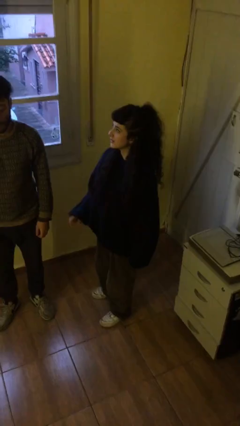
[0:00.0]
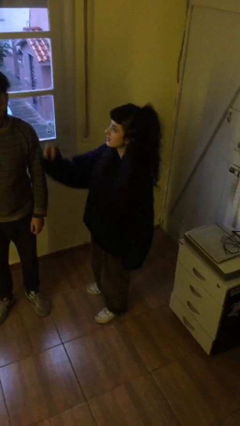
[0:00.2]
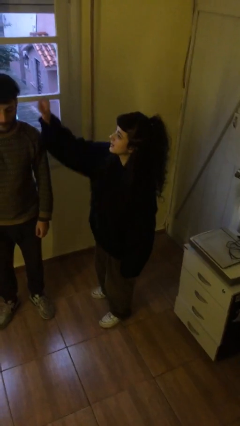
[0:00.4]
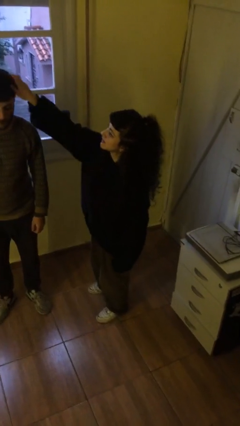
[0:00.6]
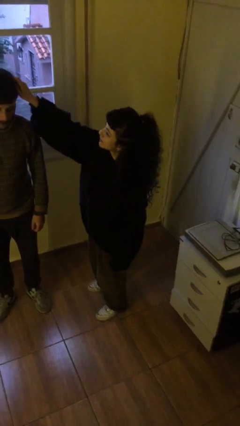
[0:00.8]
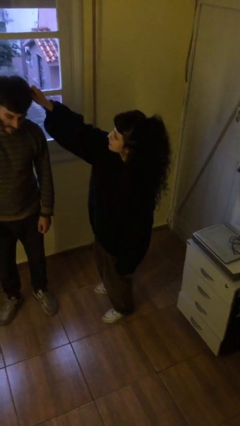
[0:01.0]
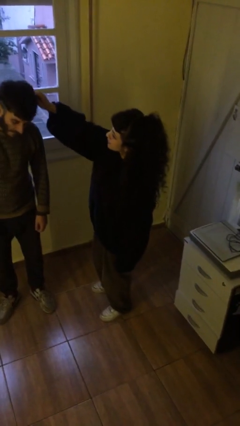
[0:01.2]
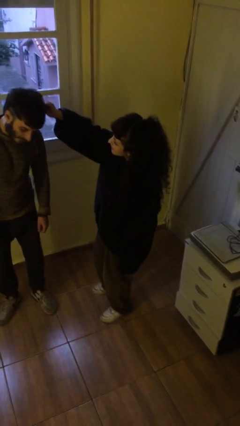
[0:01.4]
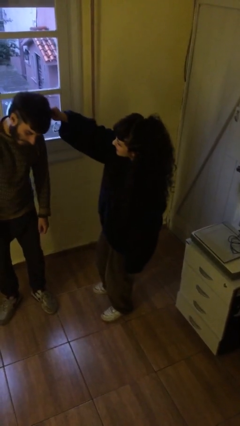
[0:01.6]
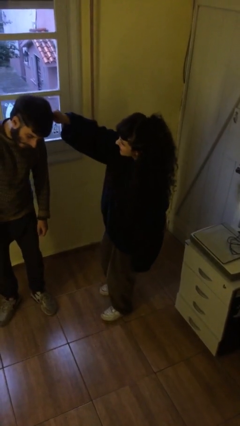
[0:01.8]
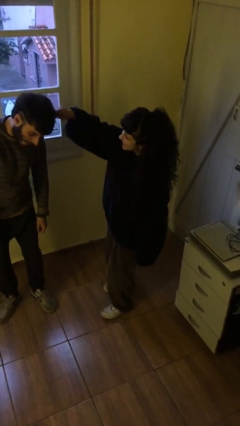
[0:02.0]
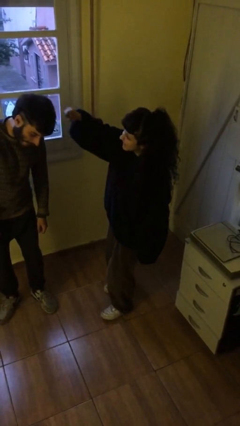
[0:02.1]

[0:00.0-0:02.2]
person grabs person by hair

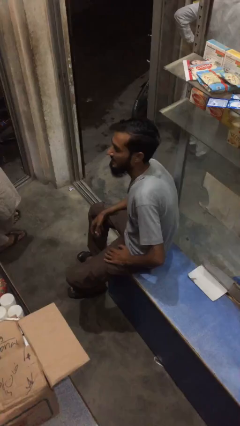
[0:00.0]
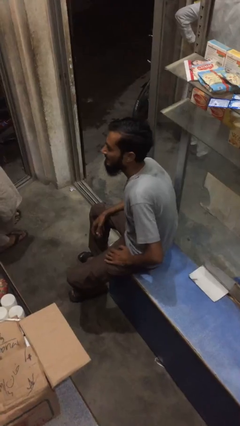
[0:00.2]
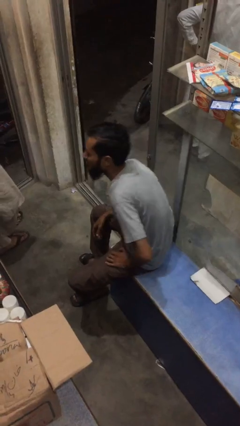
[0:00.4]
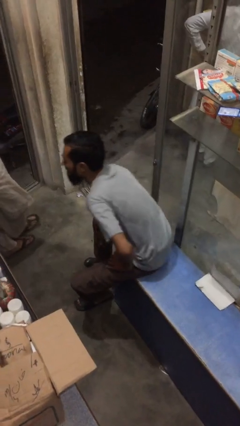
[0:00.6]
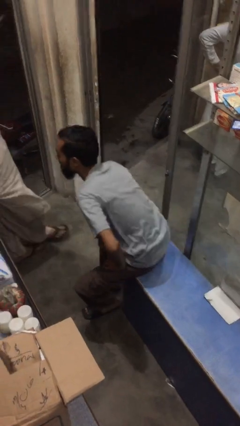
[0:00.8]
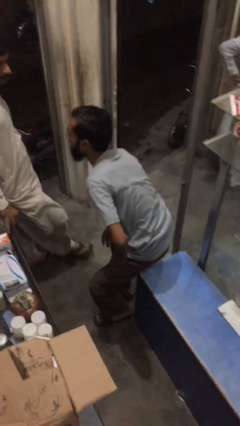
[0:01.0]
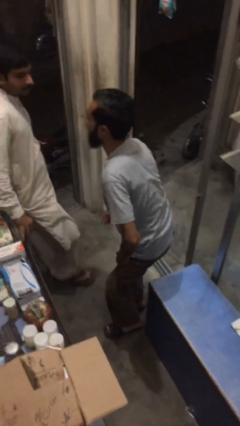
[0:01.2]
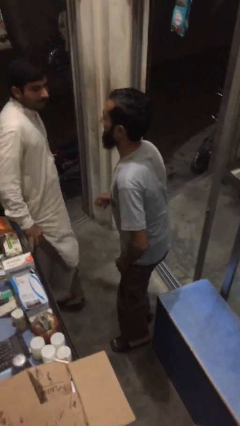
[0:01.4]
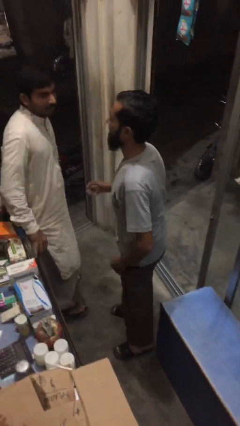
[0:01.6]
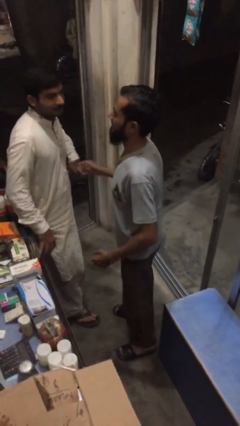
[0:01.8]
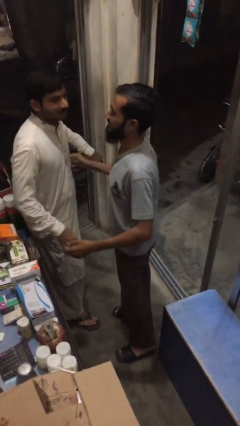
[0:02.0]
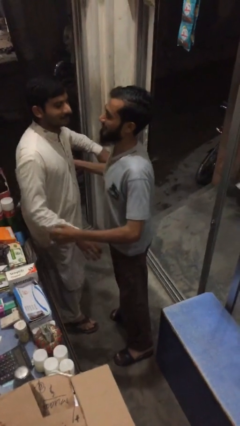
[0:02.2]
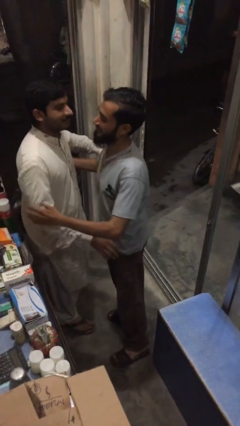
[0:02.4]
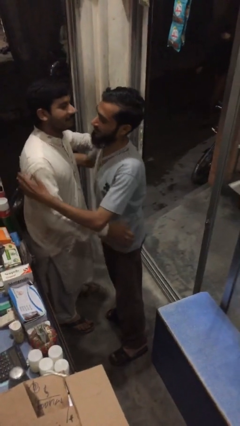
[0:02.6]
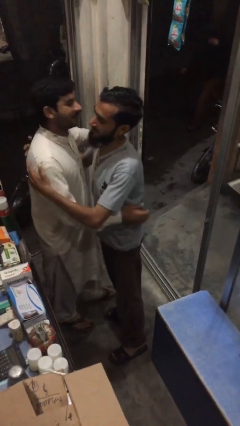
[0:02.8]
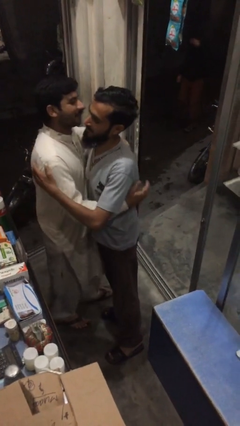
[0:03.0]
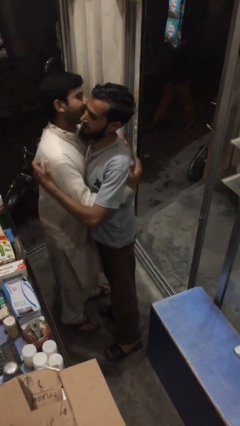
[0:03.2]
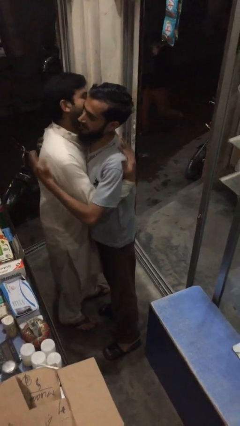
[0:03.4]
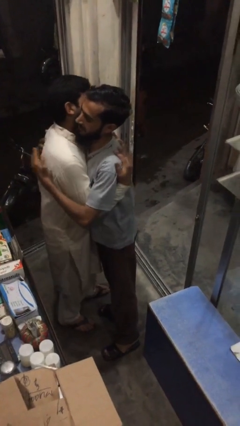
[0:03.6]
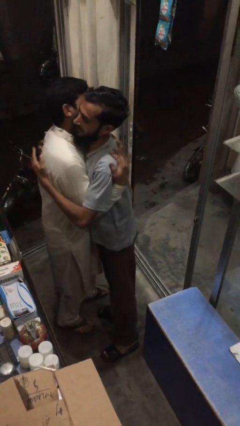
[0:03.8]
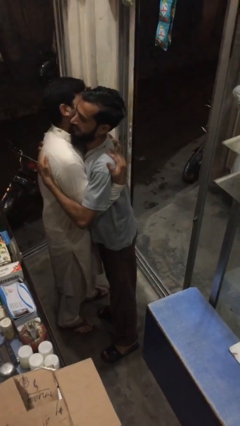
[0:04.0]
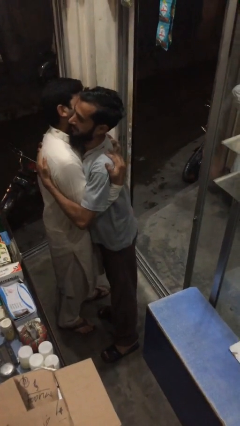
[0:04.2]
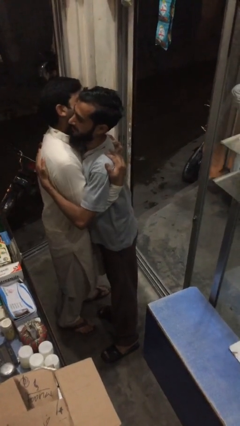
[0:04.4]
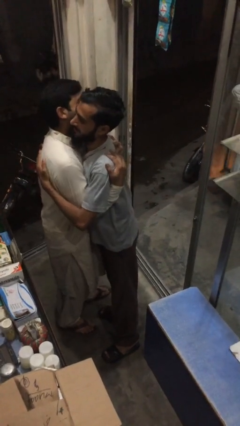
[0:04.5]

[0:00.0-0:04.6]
person embraces person

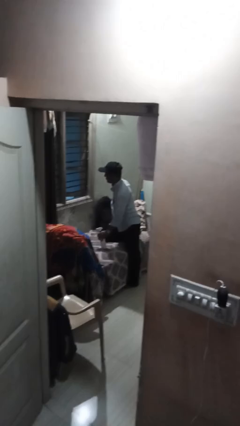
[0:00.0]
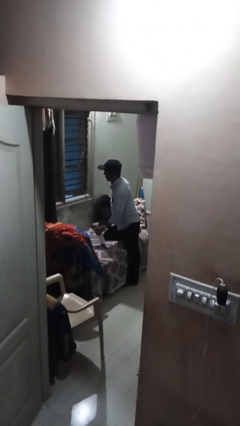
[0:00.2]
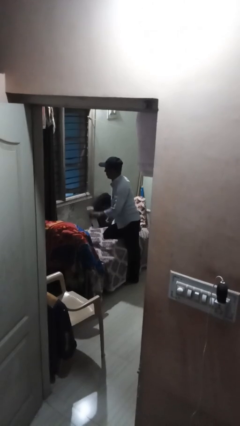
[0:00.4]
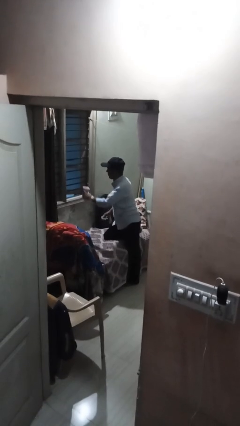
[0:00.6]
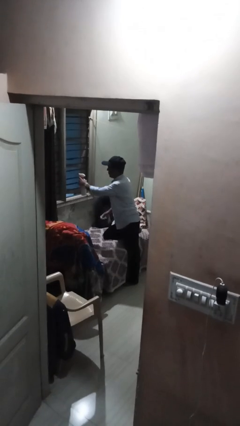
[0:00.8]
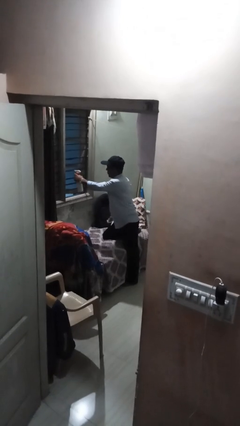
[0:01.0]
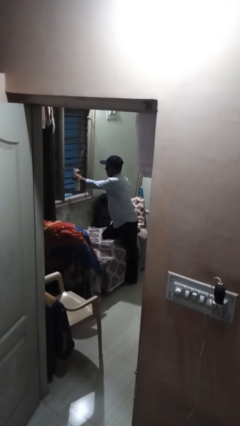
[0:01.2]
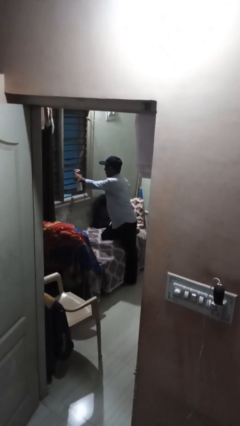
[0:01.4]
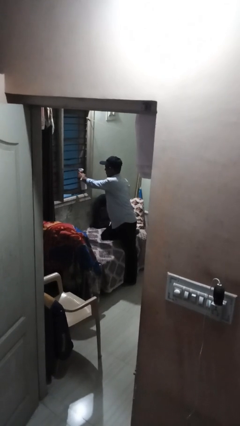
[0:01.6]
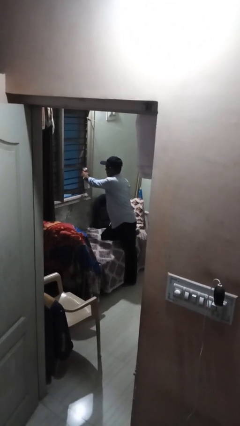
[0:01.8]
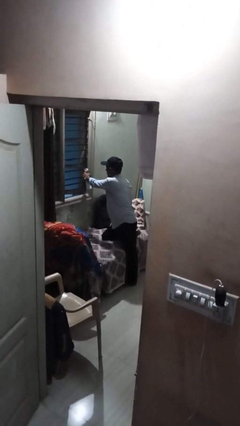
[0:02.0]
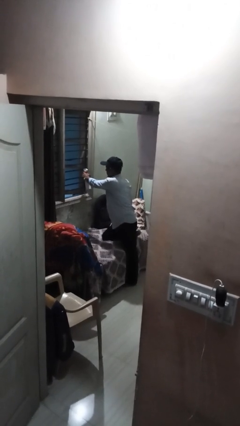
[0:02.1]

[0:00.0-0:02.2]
person sprays from bottle

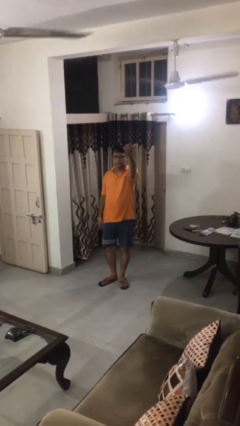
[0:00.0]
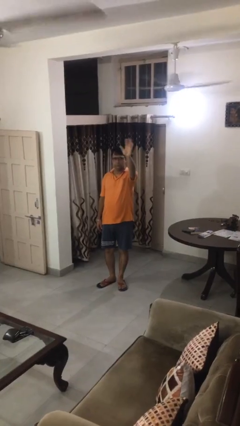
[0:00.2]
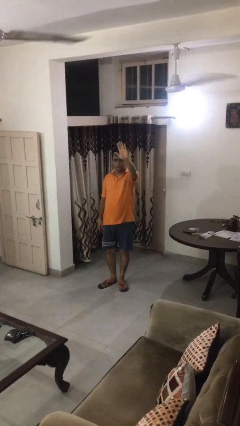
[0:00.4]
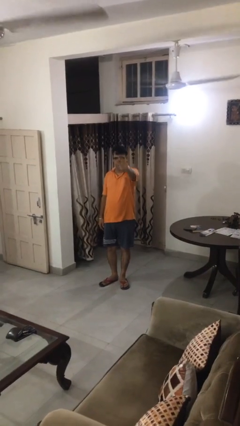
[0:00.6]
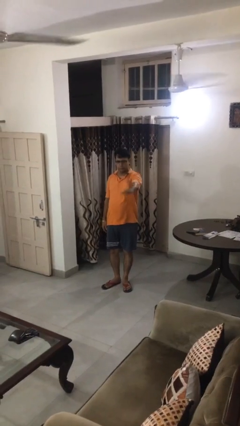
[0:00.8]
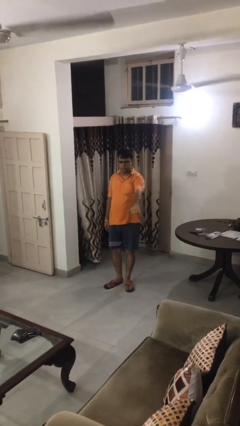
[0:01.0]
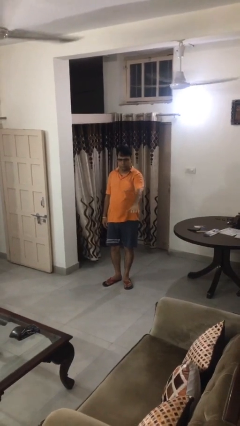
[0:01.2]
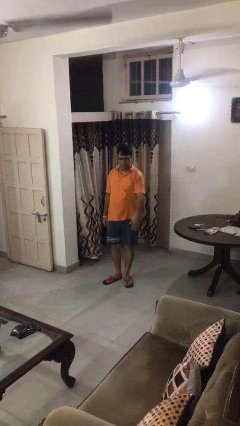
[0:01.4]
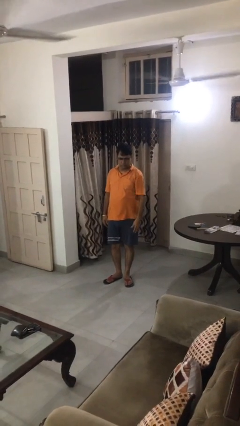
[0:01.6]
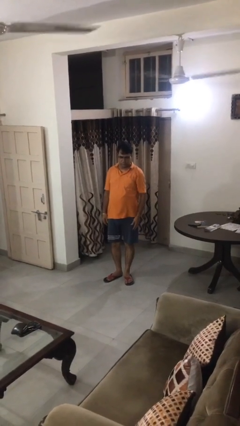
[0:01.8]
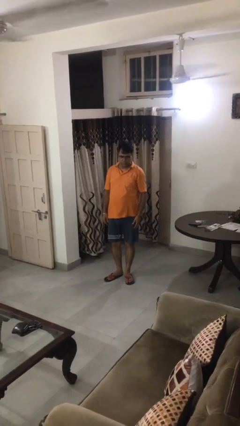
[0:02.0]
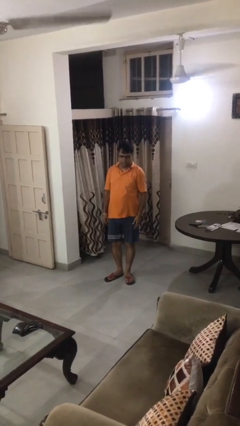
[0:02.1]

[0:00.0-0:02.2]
person gestures swipe down

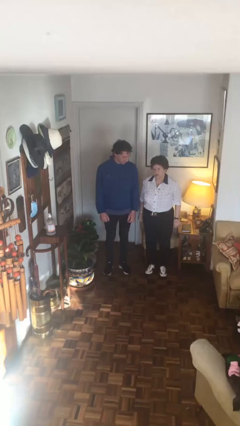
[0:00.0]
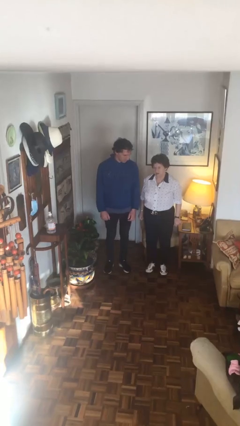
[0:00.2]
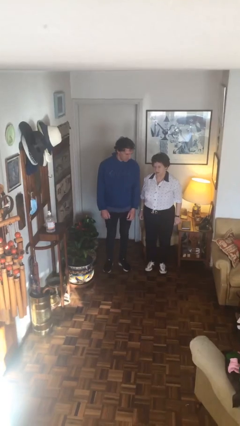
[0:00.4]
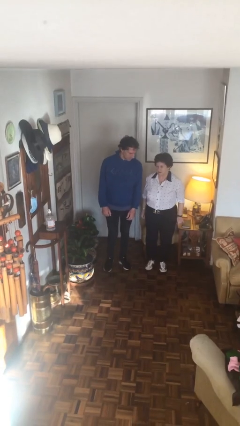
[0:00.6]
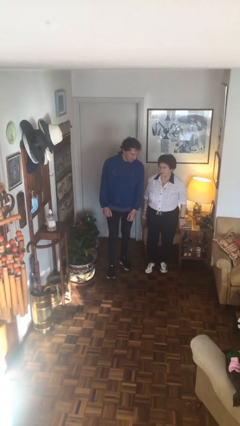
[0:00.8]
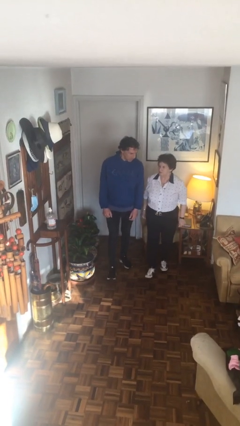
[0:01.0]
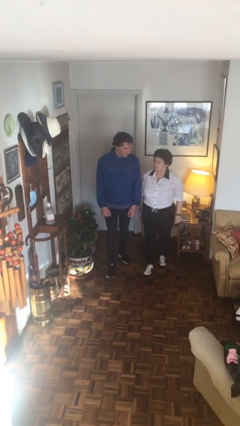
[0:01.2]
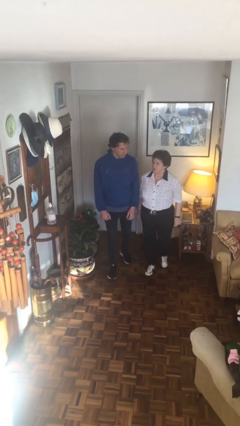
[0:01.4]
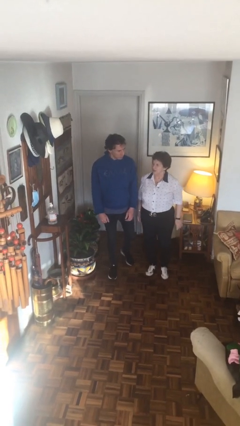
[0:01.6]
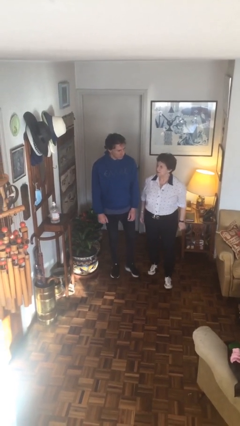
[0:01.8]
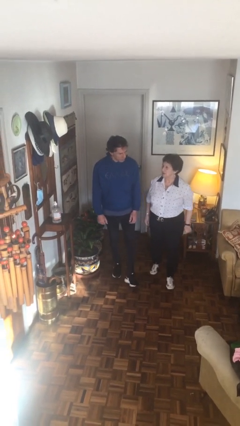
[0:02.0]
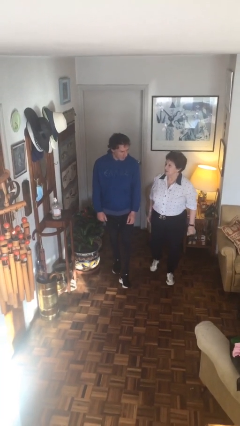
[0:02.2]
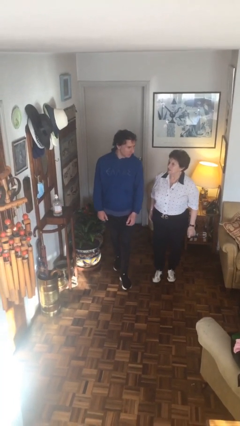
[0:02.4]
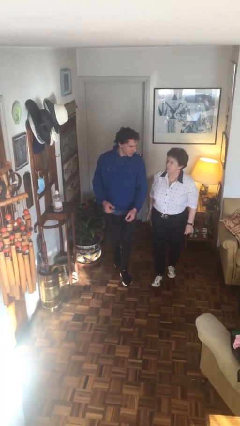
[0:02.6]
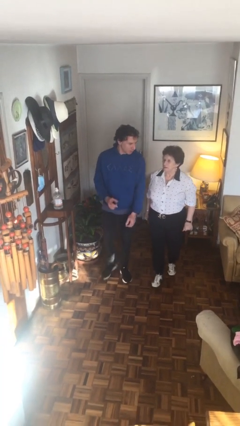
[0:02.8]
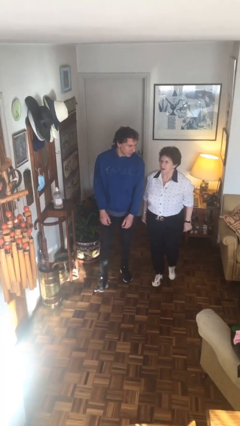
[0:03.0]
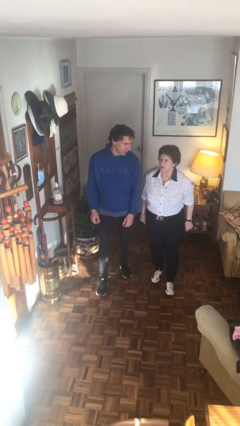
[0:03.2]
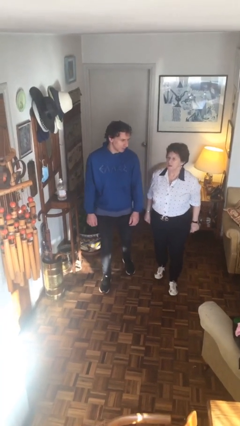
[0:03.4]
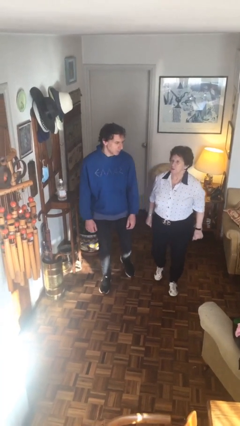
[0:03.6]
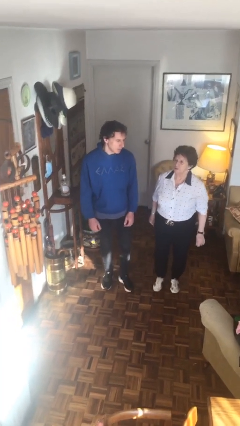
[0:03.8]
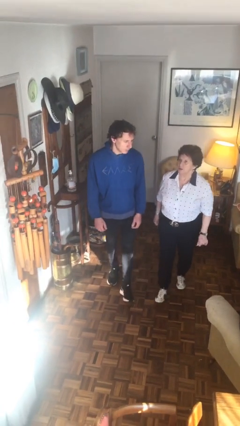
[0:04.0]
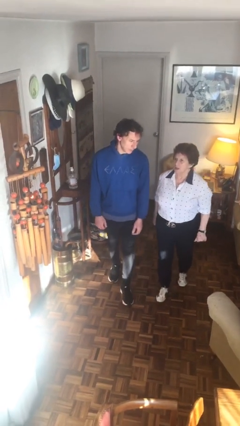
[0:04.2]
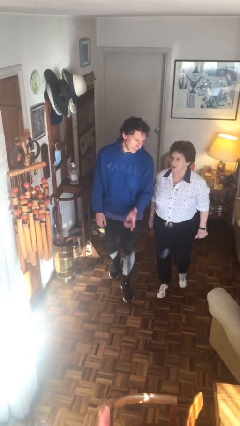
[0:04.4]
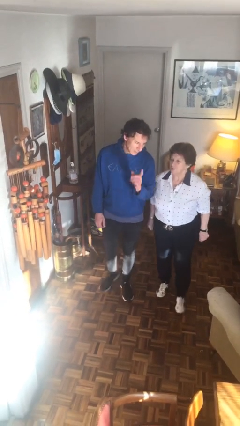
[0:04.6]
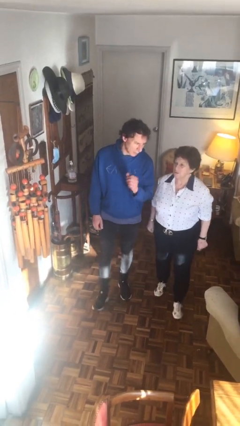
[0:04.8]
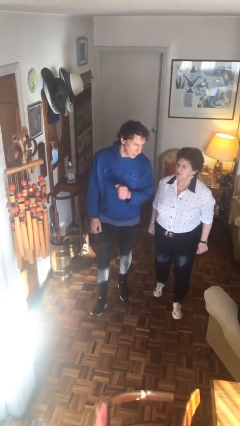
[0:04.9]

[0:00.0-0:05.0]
person talks to person

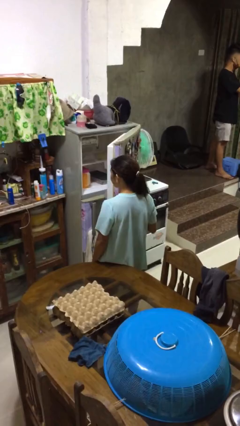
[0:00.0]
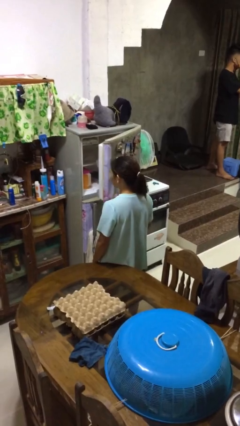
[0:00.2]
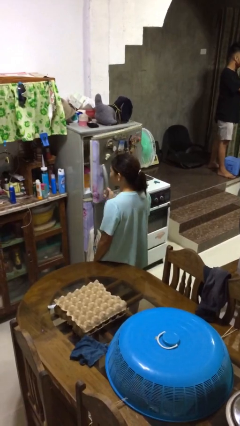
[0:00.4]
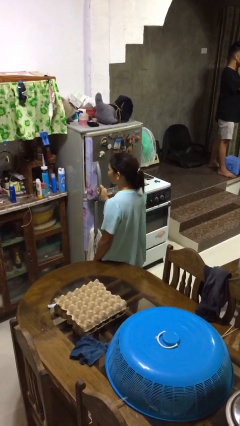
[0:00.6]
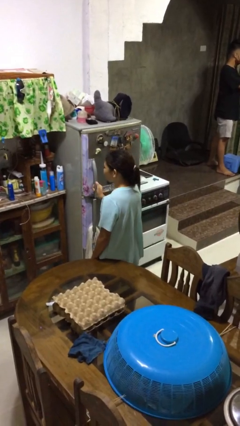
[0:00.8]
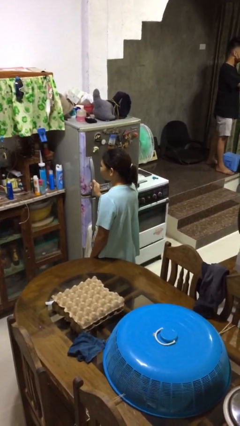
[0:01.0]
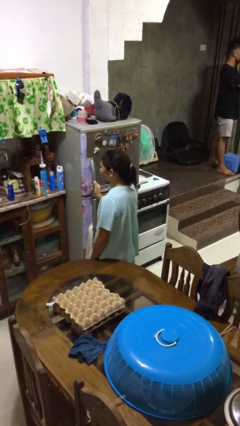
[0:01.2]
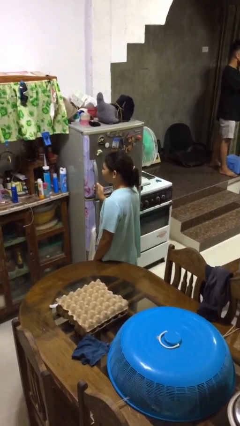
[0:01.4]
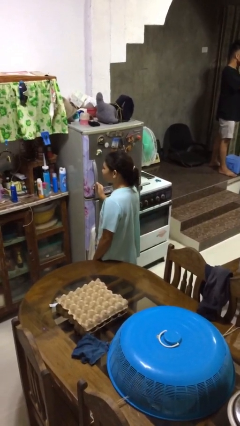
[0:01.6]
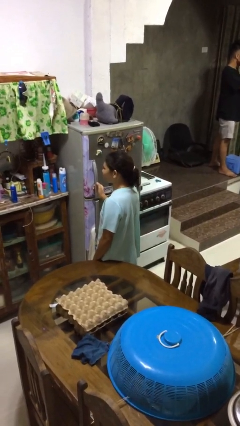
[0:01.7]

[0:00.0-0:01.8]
person closes refrigerator
